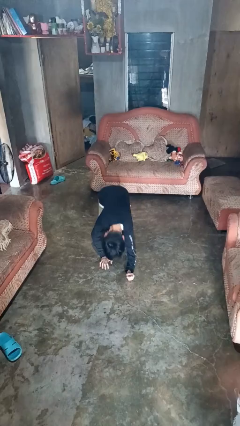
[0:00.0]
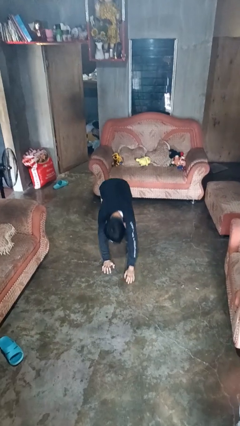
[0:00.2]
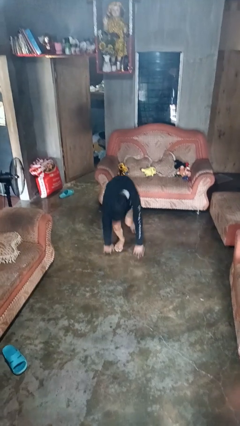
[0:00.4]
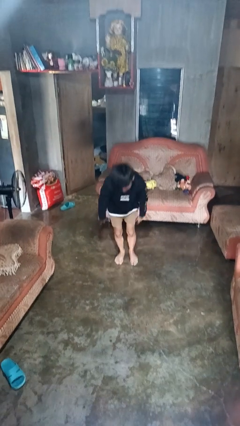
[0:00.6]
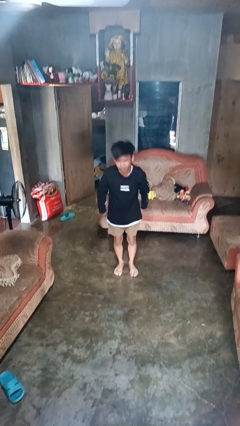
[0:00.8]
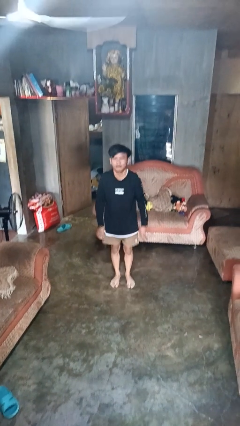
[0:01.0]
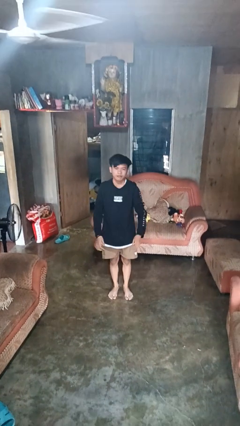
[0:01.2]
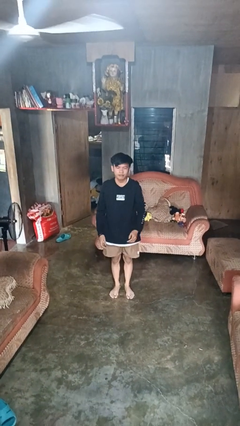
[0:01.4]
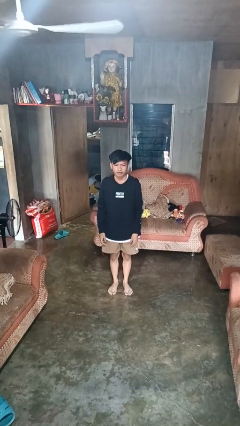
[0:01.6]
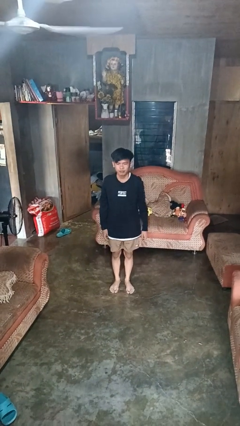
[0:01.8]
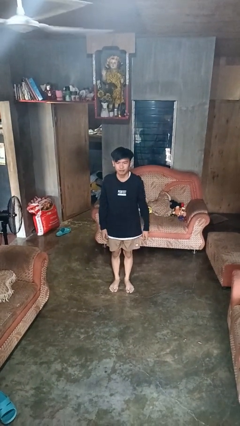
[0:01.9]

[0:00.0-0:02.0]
person stands up from floor

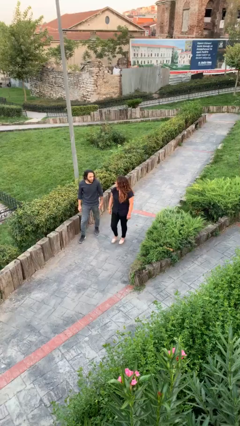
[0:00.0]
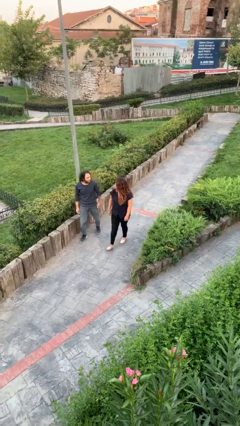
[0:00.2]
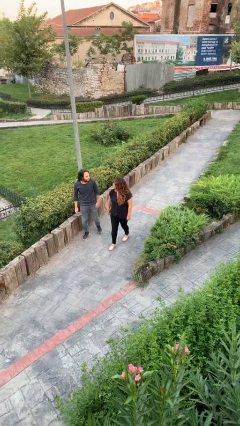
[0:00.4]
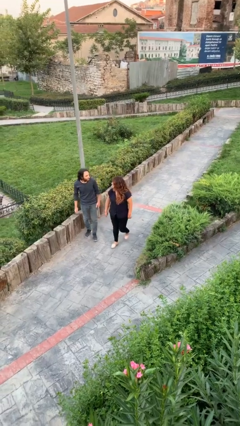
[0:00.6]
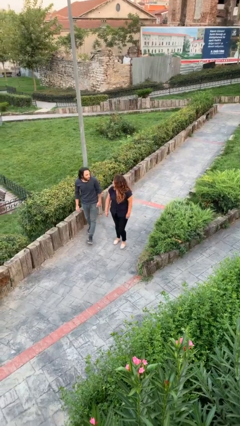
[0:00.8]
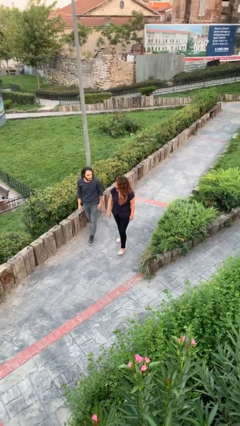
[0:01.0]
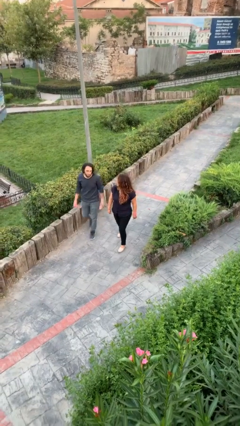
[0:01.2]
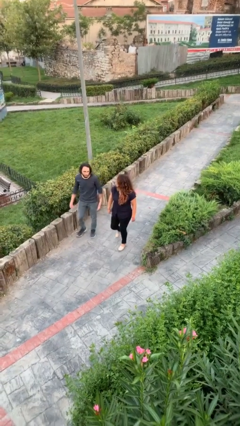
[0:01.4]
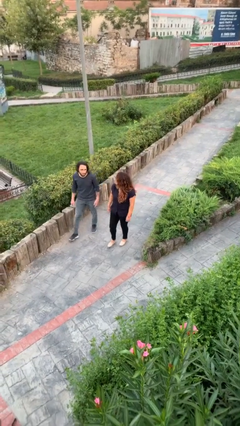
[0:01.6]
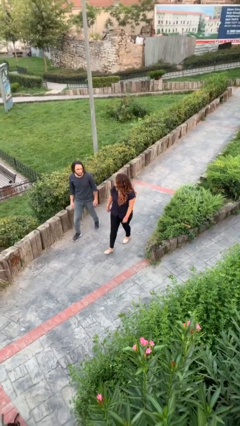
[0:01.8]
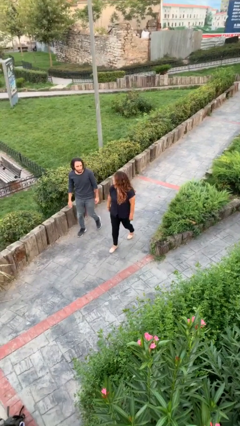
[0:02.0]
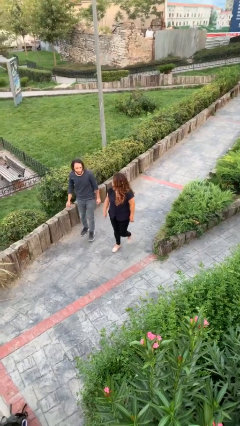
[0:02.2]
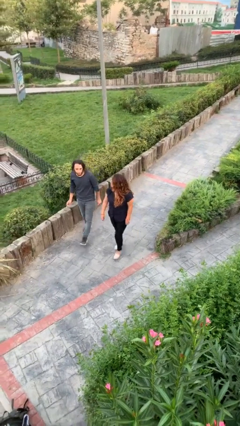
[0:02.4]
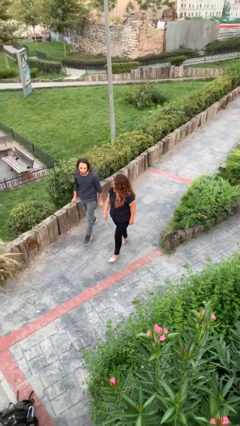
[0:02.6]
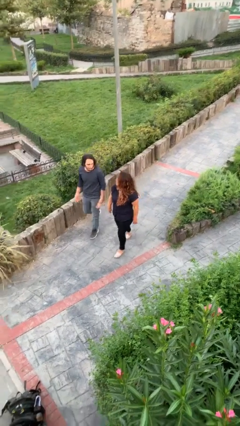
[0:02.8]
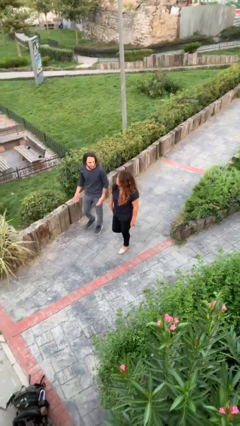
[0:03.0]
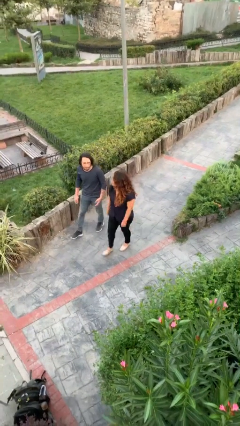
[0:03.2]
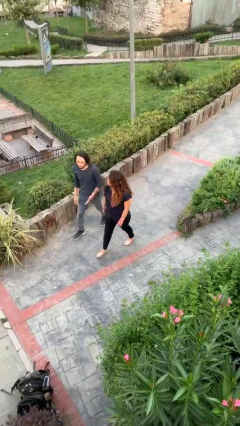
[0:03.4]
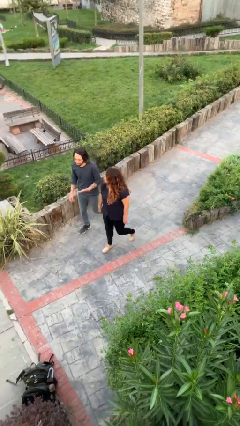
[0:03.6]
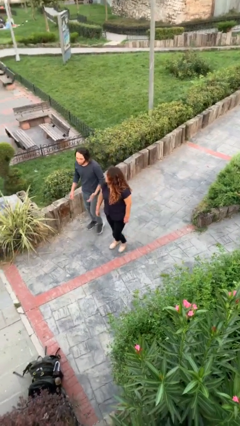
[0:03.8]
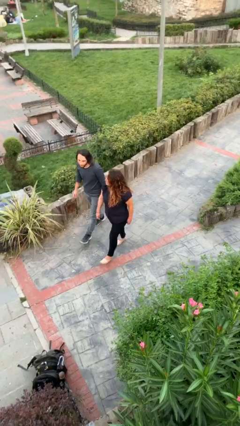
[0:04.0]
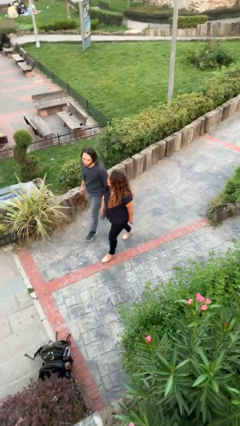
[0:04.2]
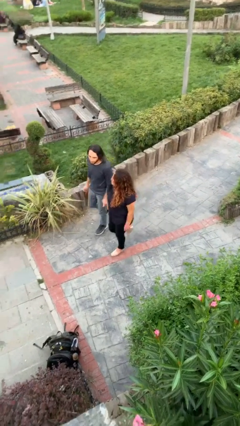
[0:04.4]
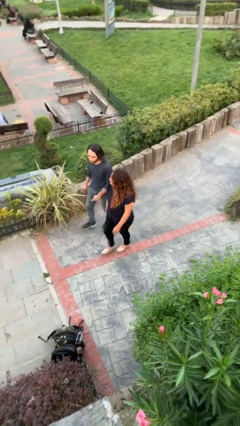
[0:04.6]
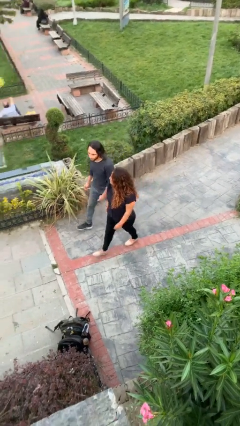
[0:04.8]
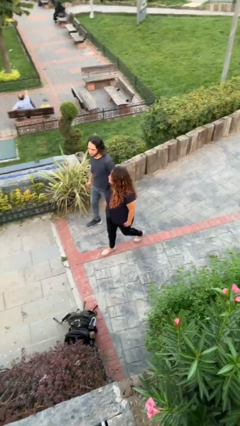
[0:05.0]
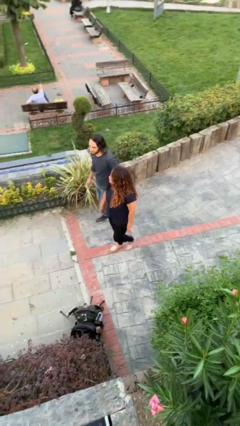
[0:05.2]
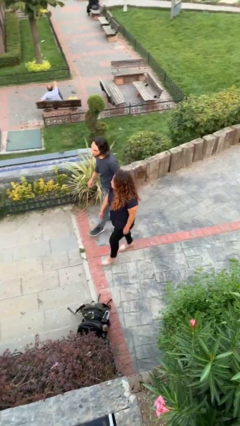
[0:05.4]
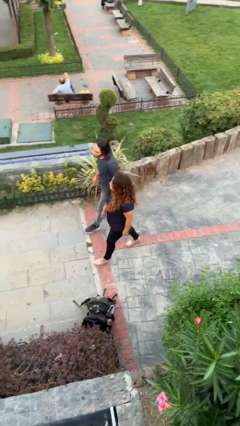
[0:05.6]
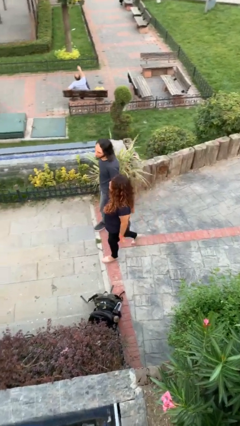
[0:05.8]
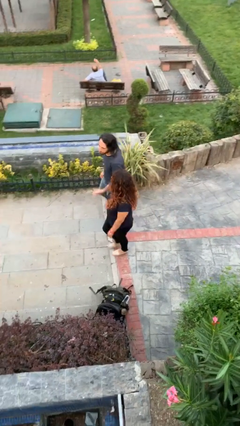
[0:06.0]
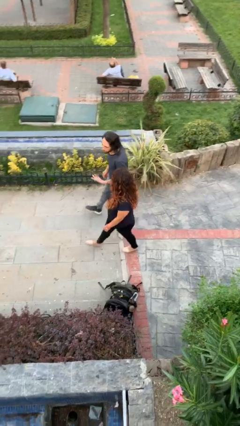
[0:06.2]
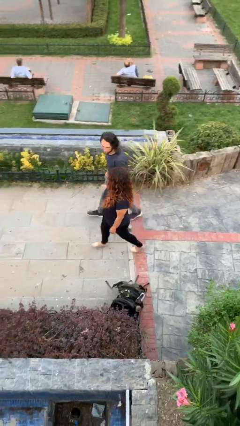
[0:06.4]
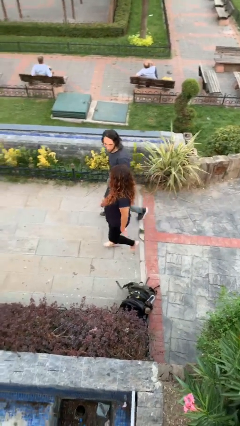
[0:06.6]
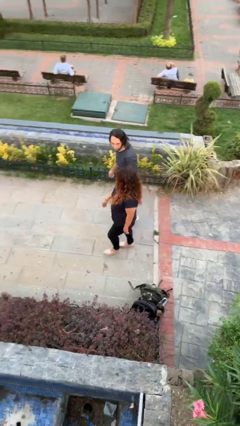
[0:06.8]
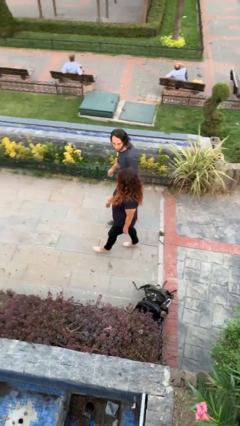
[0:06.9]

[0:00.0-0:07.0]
person talks to person

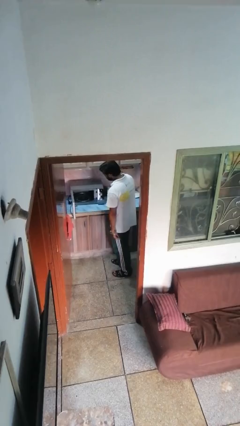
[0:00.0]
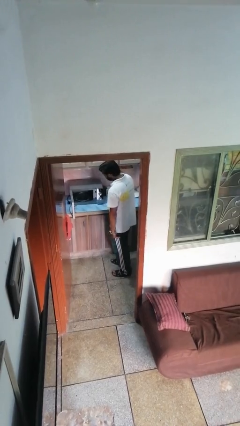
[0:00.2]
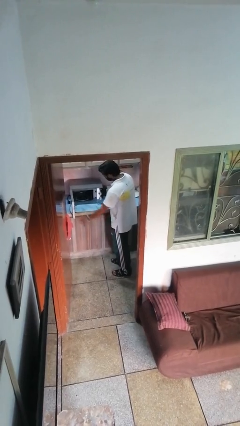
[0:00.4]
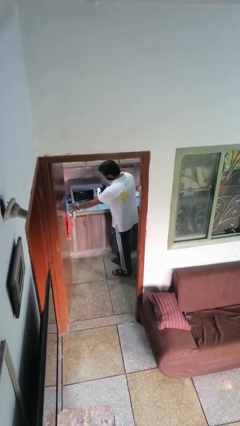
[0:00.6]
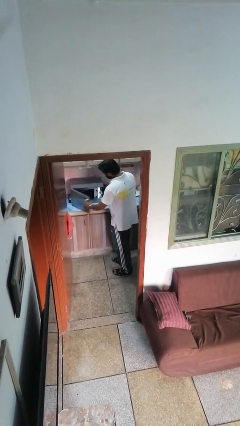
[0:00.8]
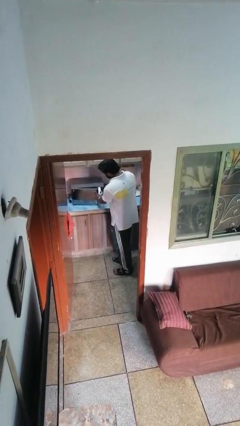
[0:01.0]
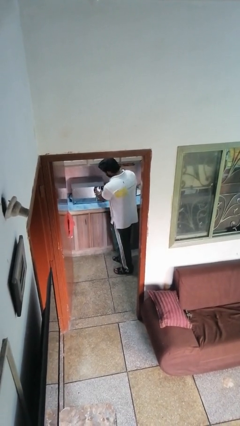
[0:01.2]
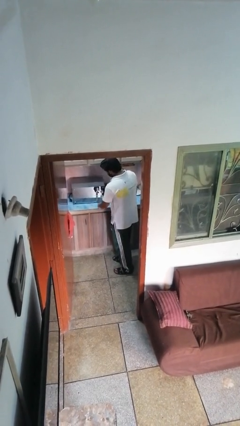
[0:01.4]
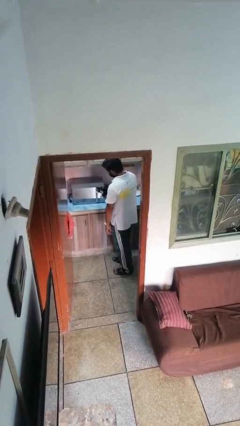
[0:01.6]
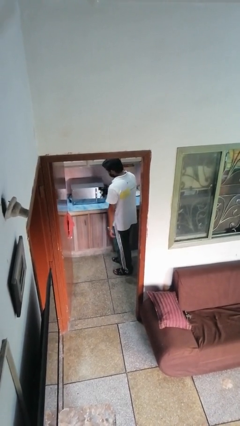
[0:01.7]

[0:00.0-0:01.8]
person closes microwave

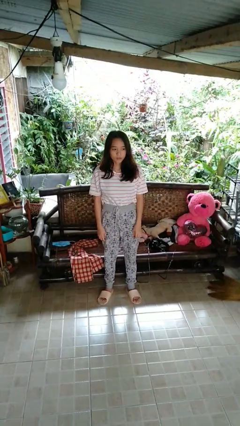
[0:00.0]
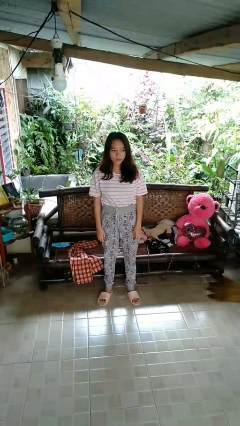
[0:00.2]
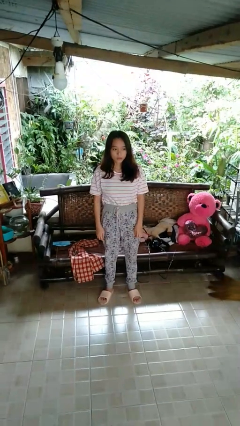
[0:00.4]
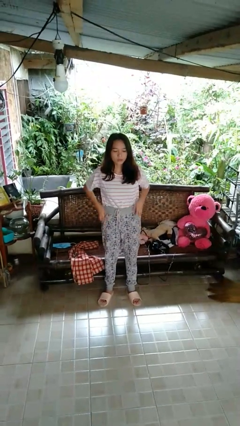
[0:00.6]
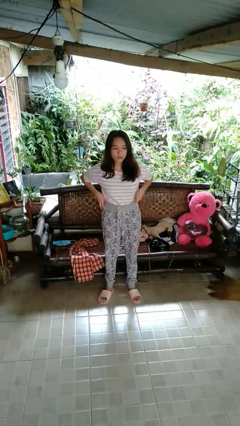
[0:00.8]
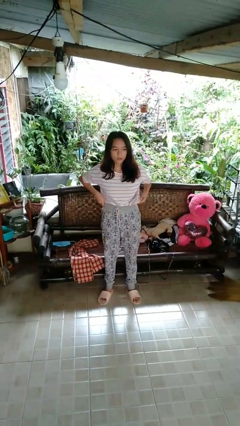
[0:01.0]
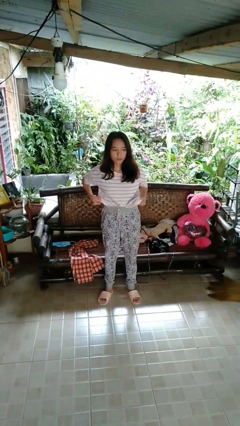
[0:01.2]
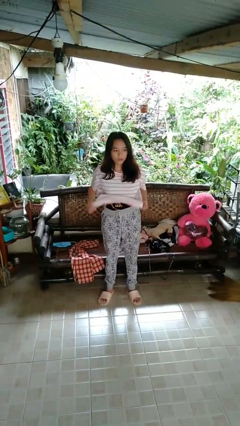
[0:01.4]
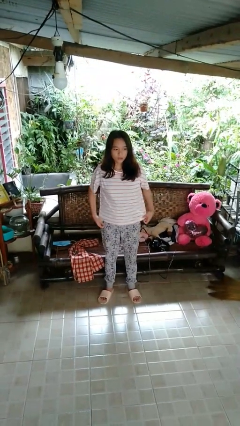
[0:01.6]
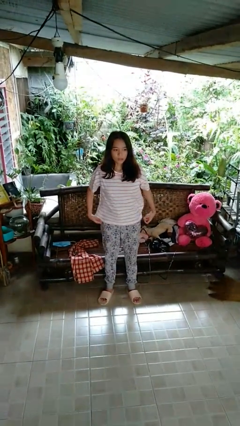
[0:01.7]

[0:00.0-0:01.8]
person untucks shirt

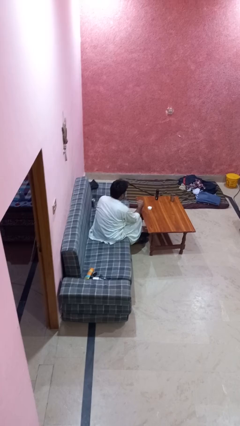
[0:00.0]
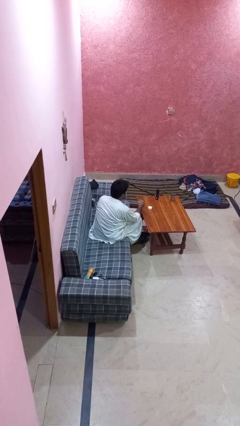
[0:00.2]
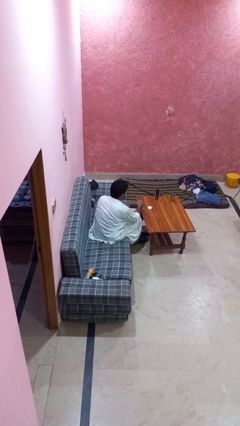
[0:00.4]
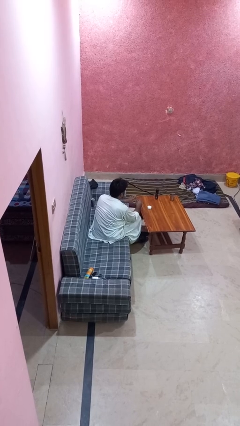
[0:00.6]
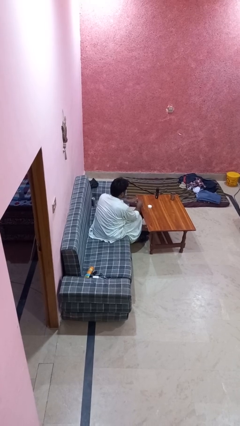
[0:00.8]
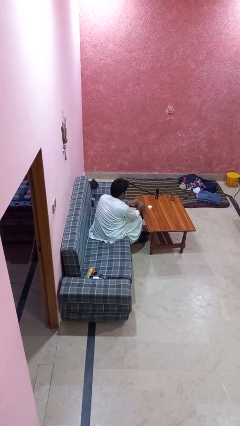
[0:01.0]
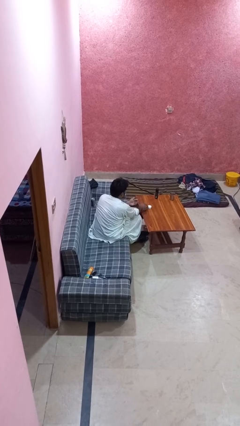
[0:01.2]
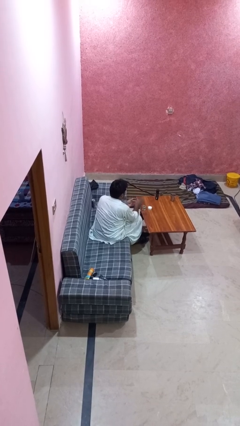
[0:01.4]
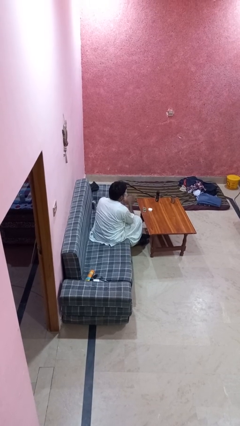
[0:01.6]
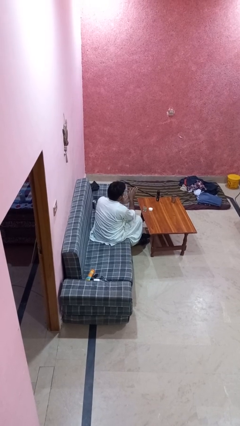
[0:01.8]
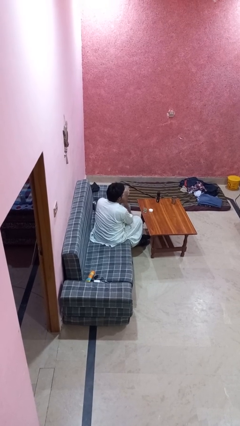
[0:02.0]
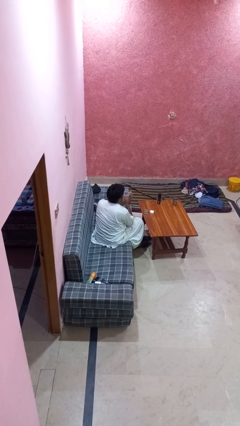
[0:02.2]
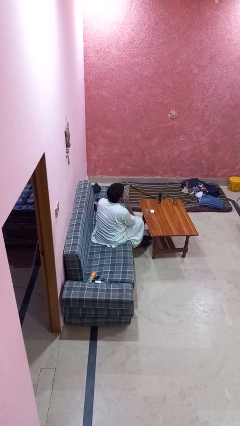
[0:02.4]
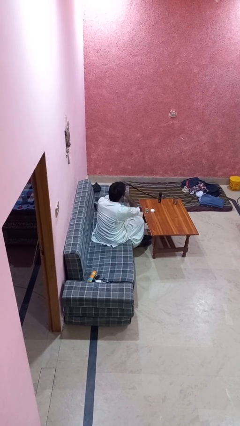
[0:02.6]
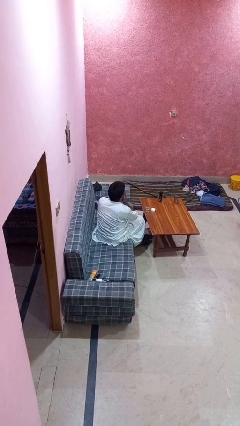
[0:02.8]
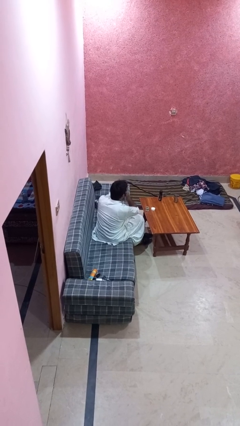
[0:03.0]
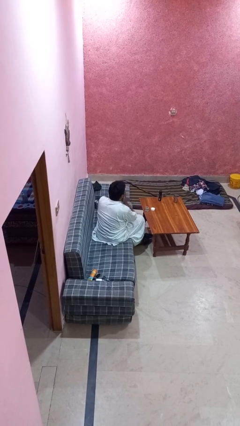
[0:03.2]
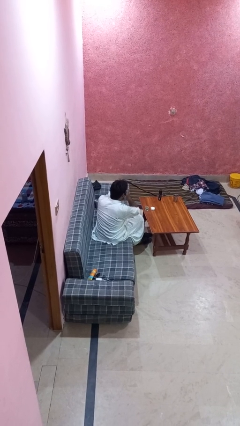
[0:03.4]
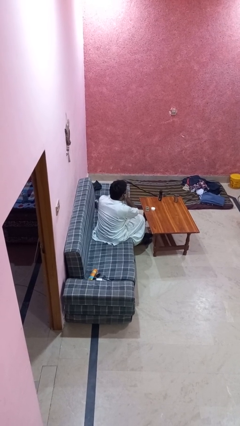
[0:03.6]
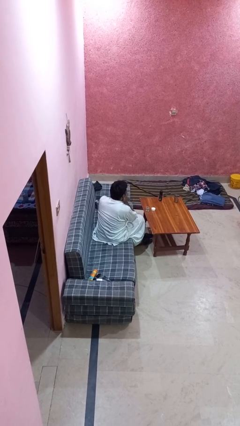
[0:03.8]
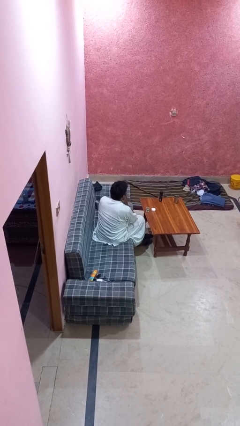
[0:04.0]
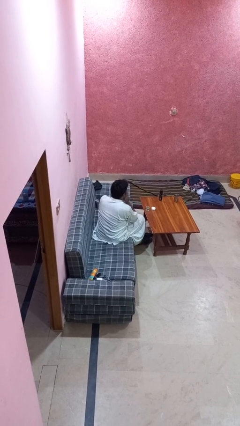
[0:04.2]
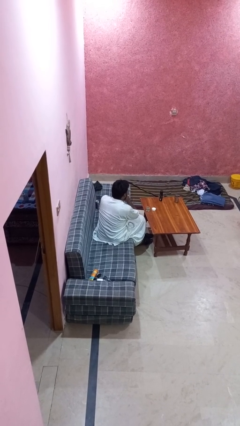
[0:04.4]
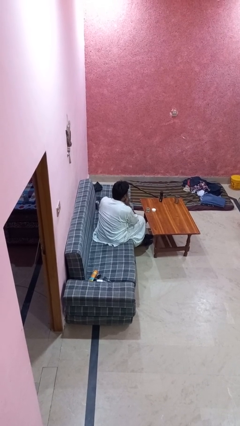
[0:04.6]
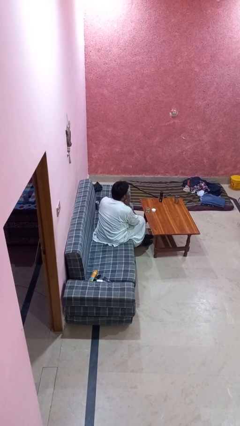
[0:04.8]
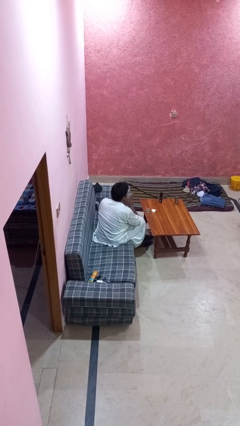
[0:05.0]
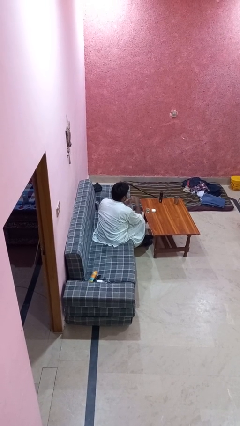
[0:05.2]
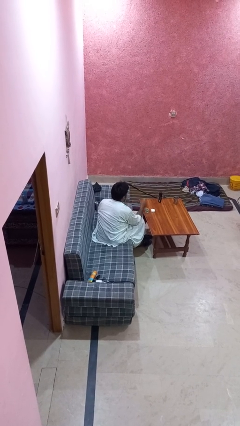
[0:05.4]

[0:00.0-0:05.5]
person applies facial moisturizer
